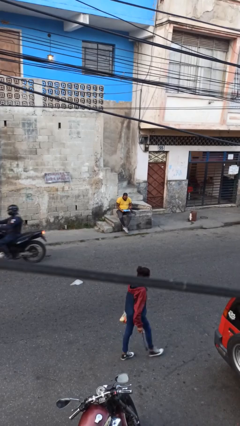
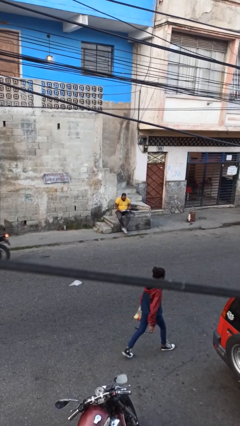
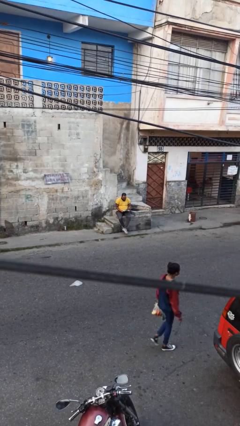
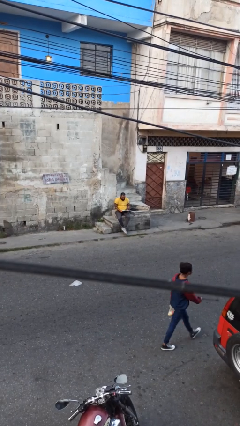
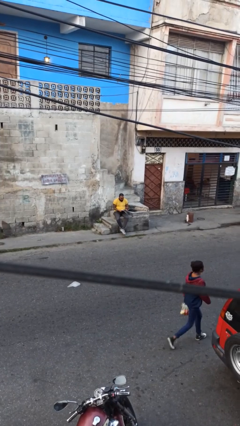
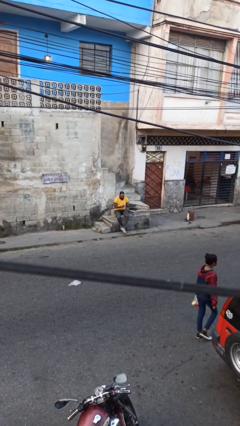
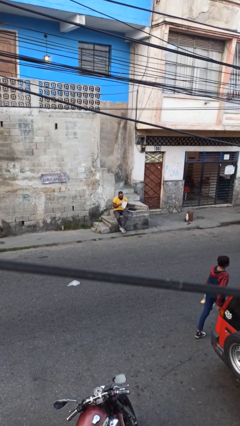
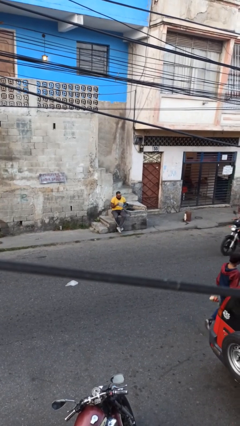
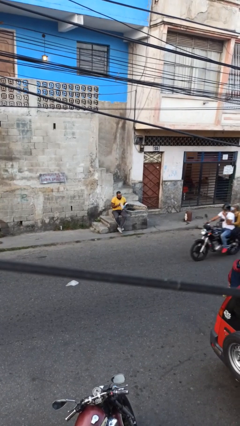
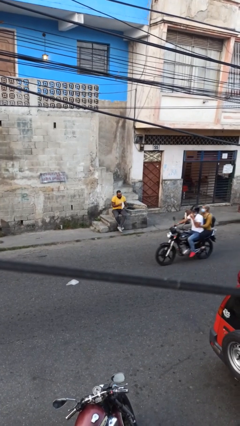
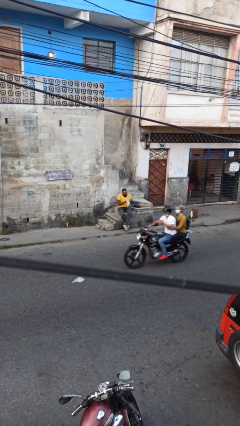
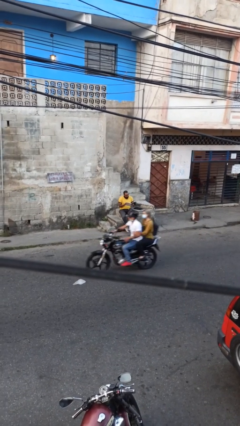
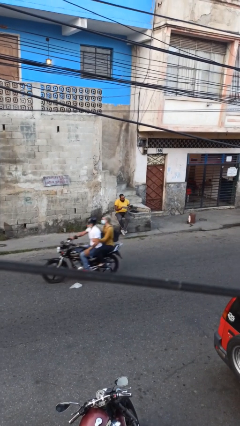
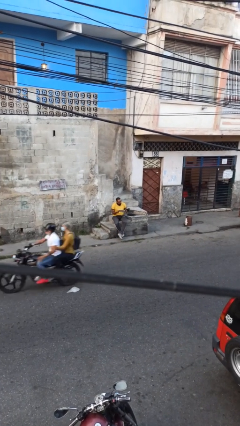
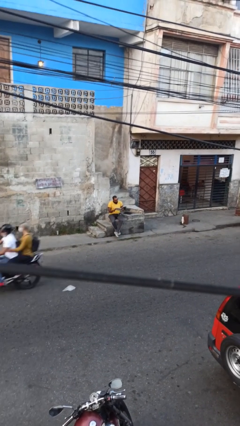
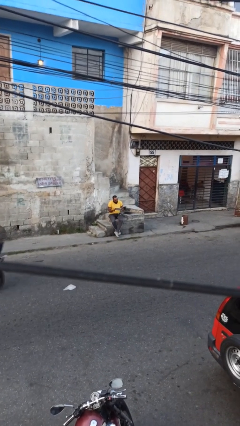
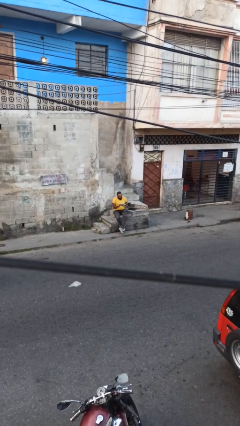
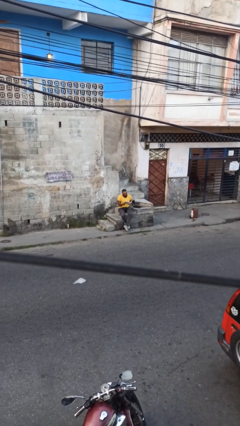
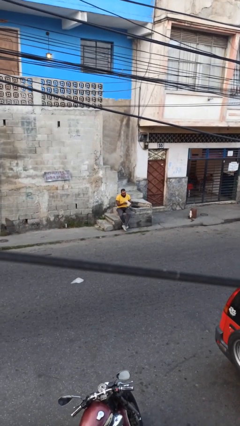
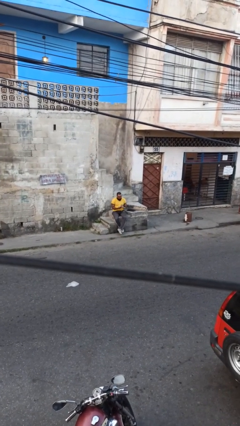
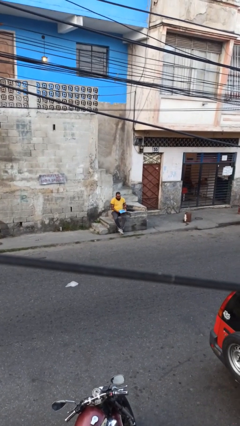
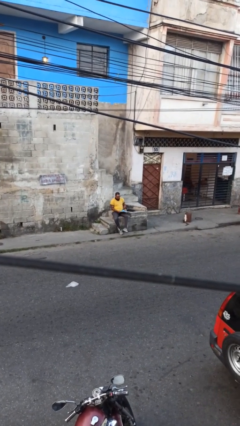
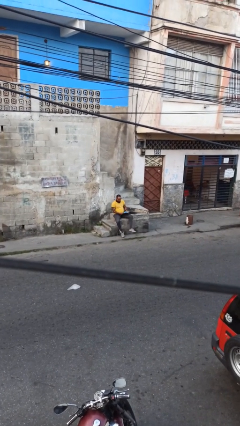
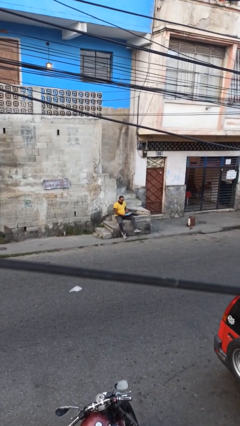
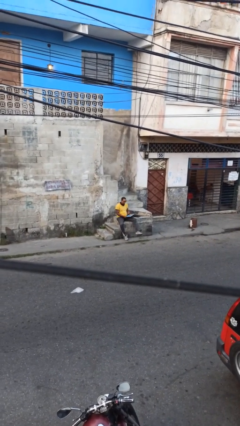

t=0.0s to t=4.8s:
person reads document

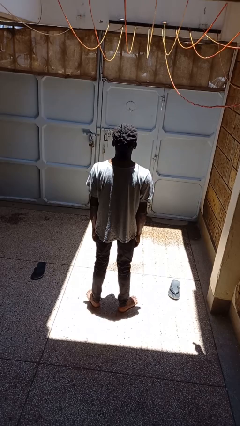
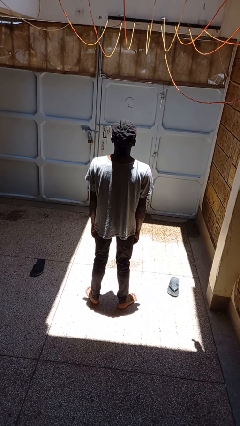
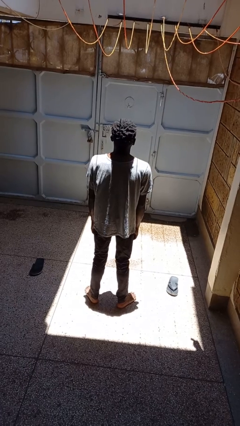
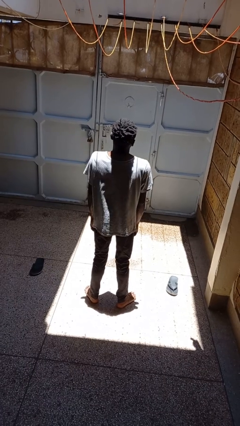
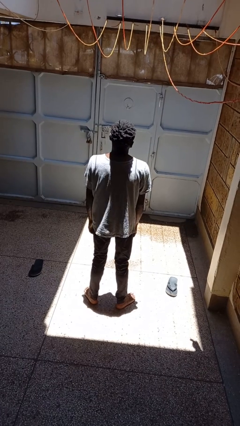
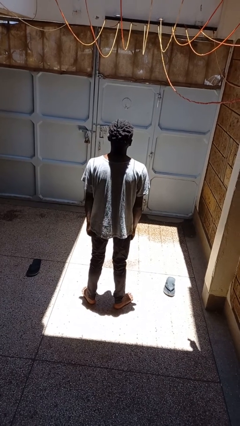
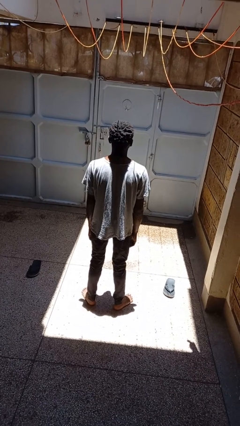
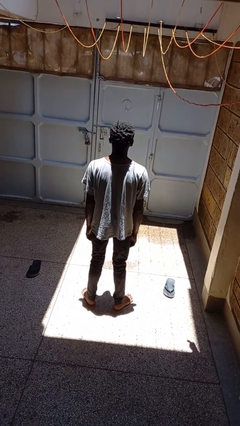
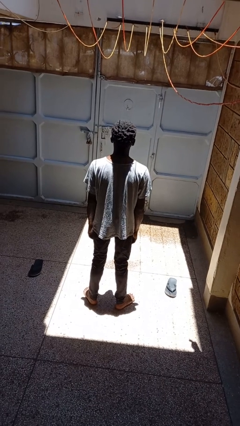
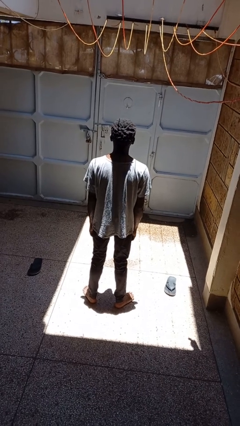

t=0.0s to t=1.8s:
person shrugs

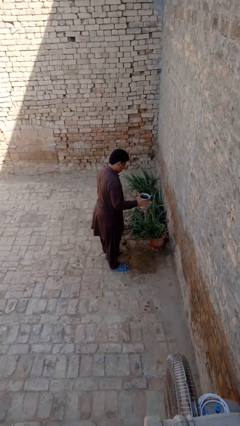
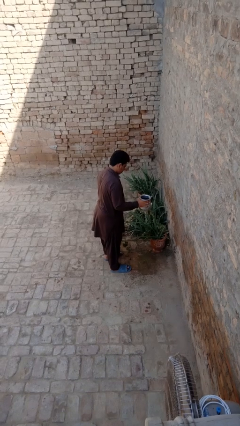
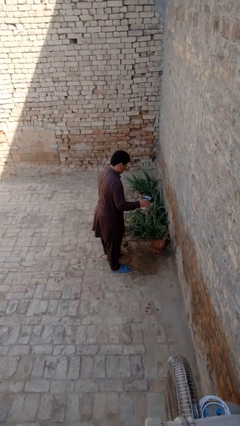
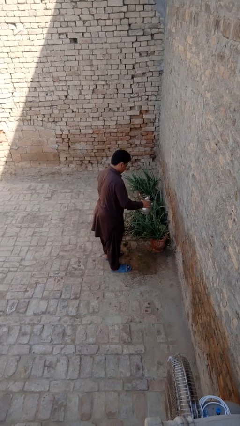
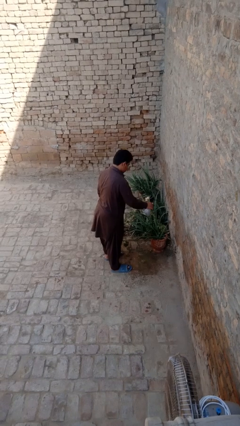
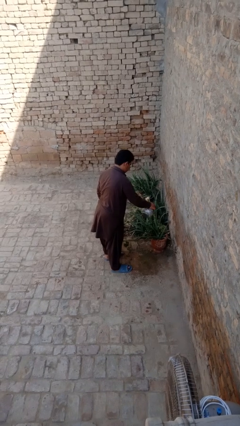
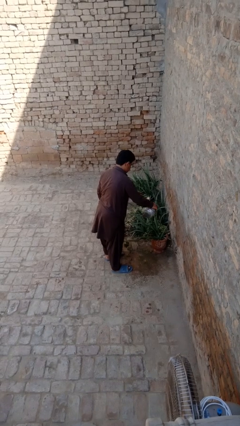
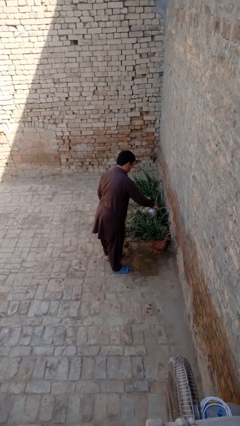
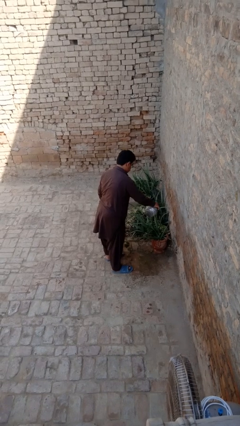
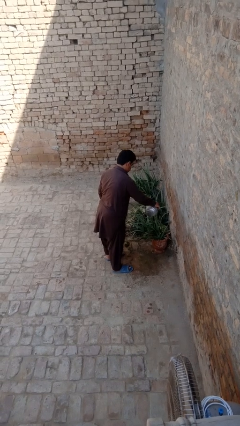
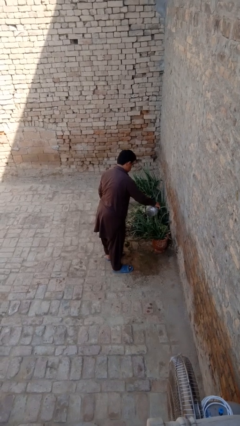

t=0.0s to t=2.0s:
person waters houseplant

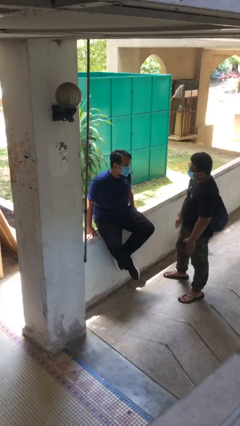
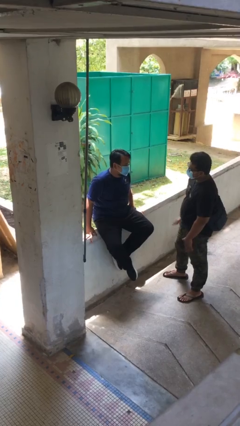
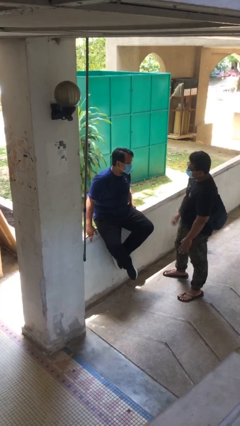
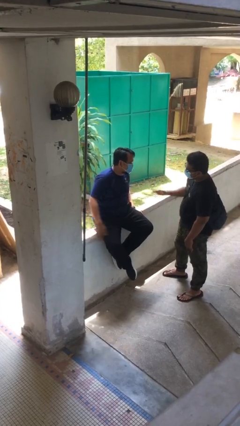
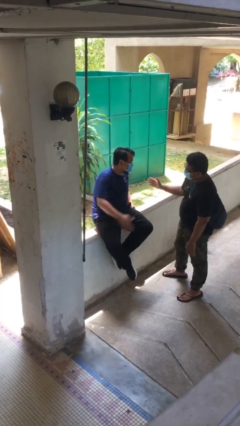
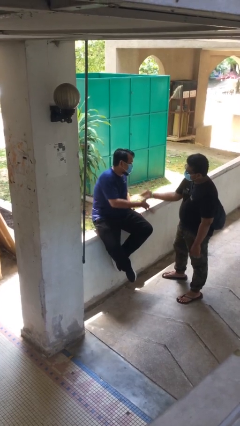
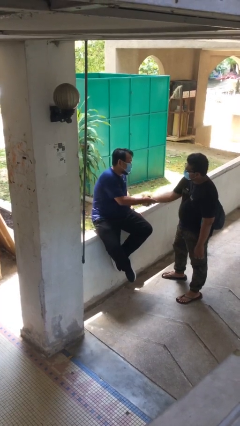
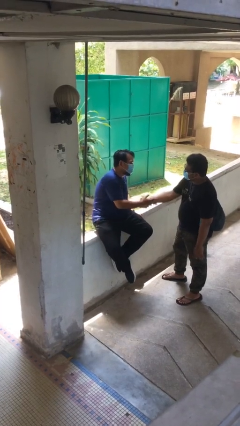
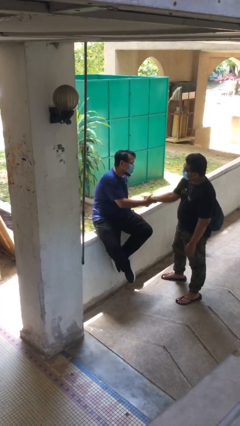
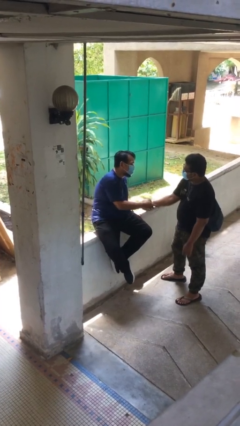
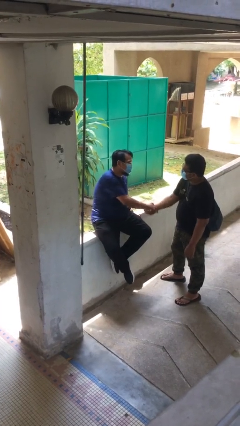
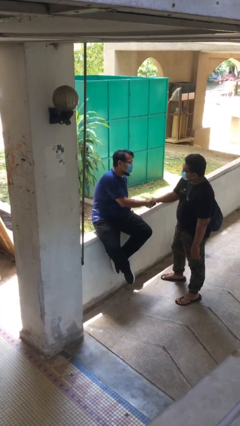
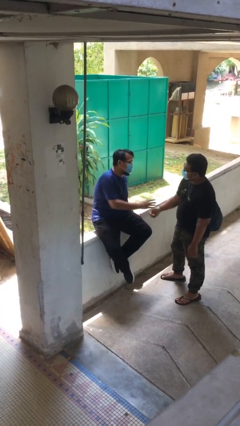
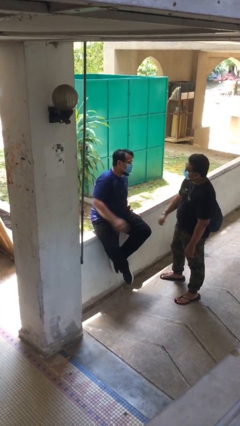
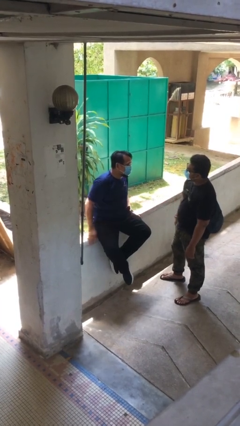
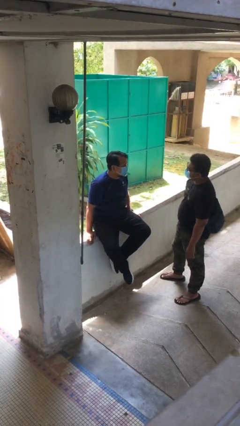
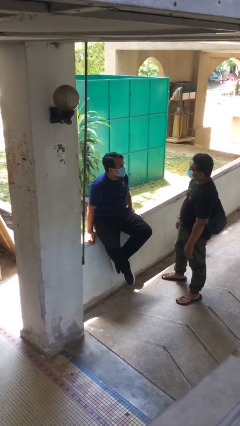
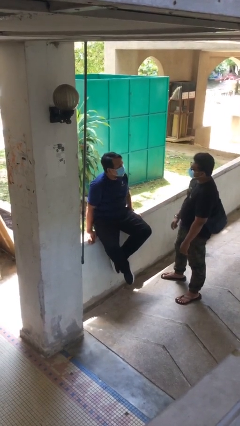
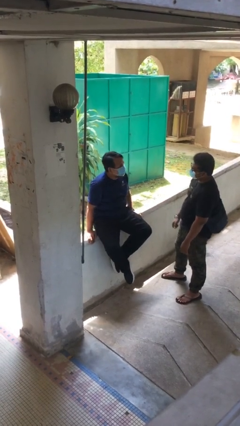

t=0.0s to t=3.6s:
person shakes hand

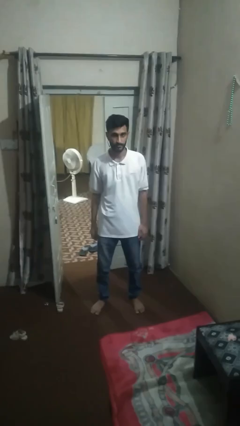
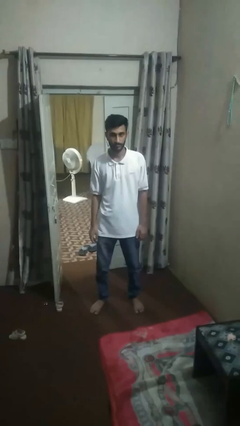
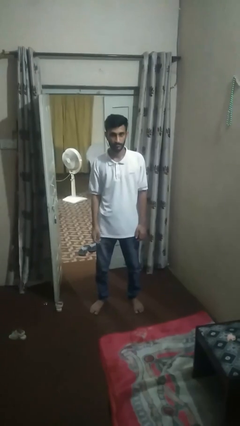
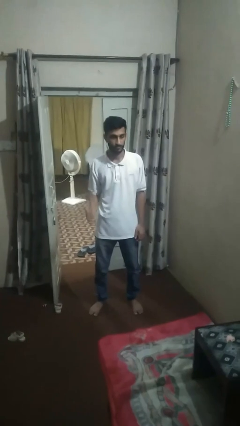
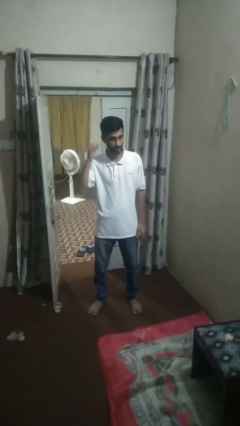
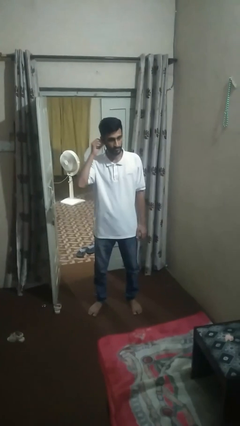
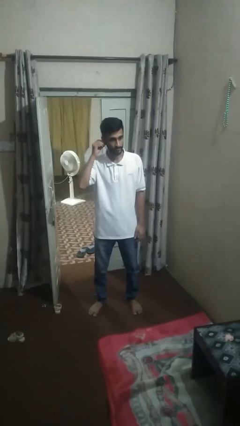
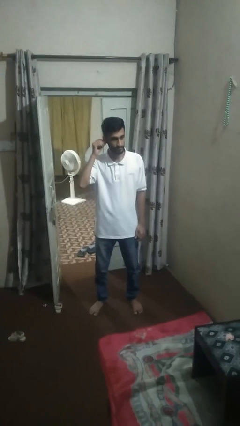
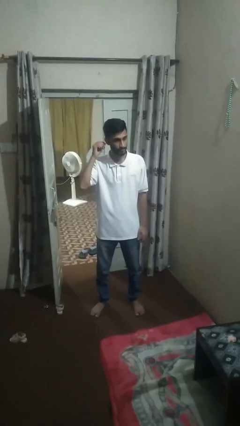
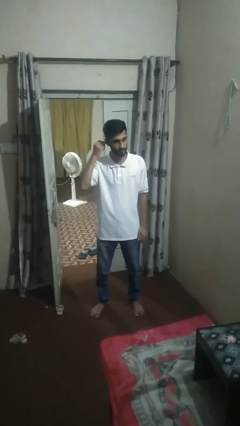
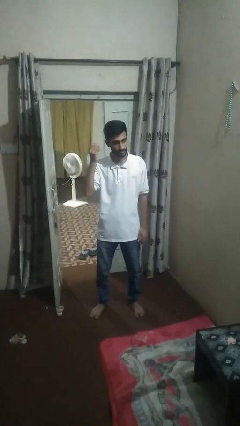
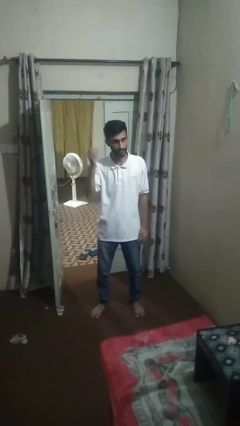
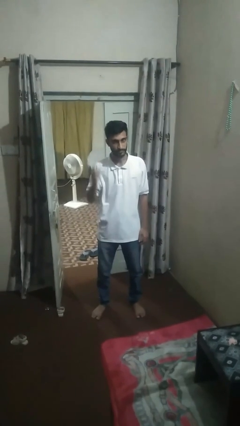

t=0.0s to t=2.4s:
person takes off earrings

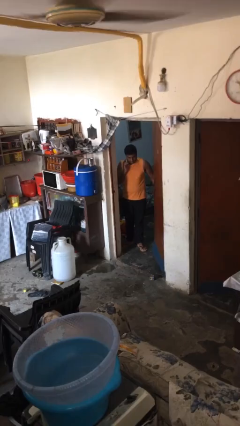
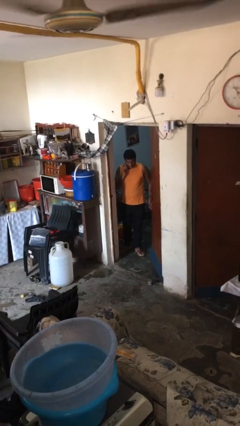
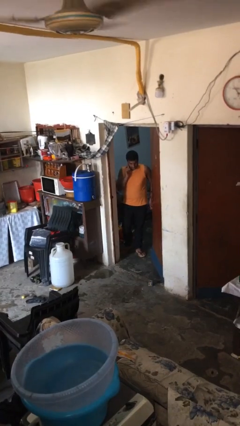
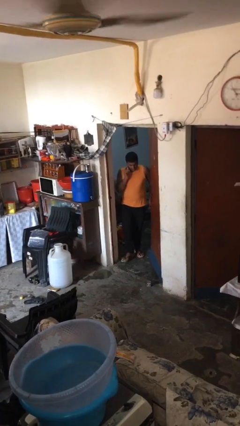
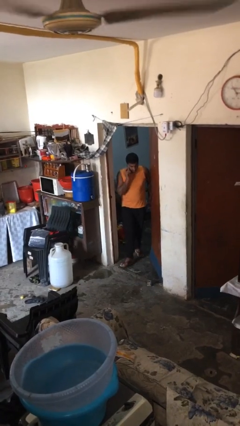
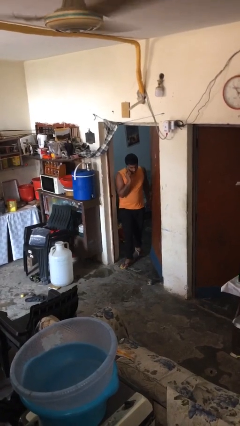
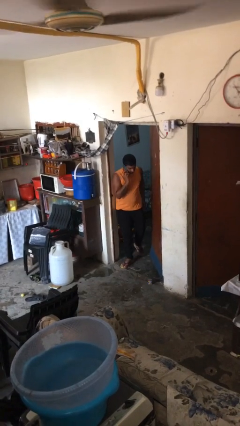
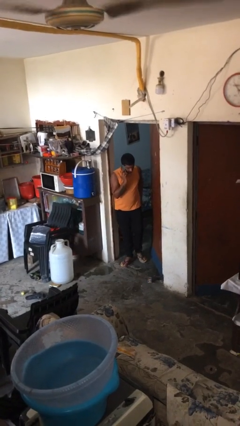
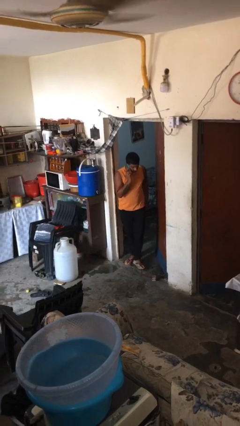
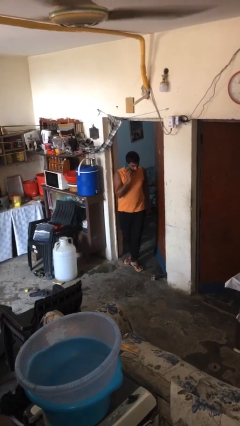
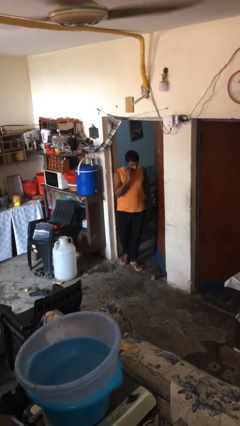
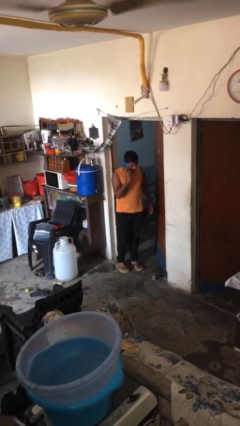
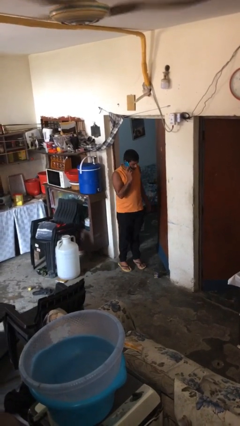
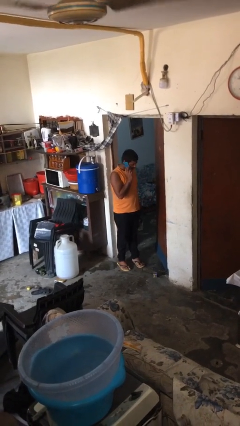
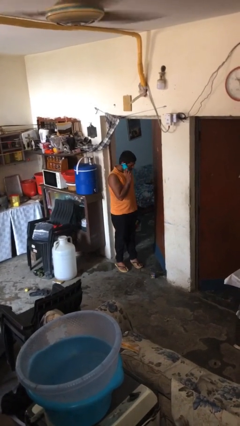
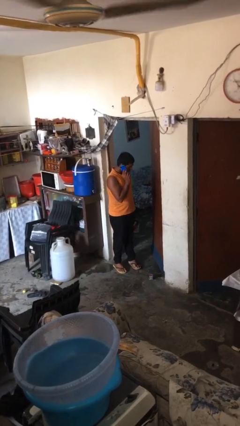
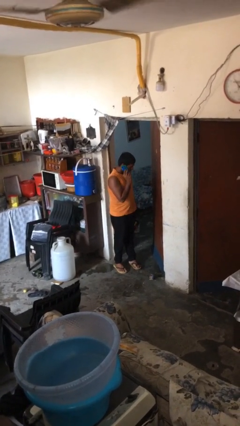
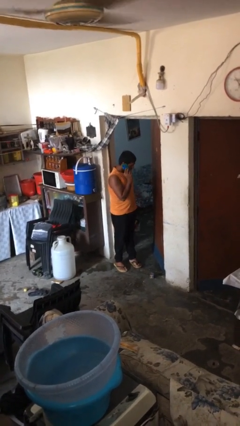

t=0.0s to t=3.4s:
person enters scene through structure
